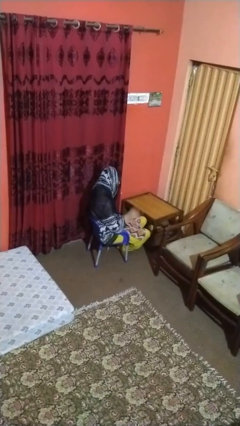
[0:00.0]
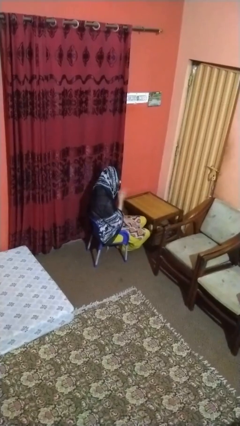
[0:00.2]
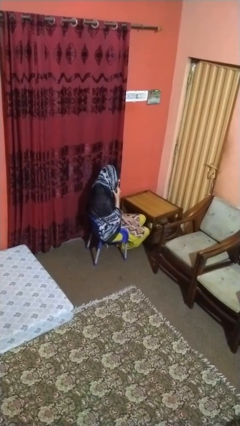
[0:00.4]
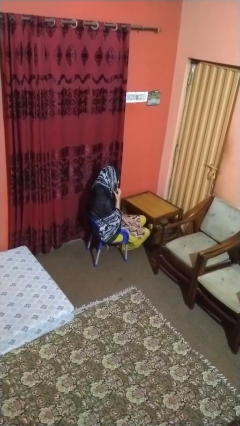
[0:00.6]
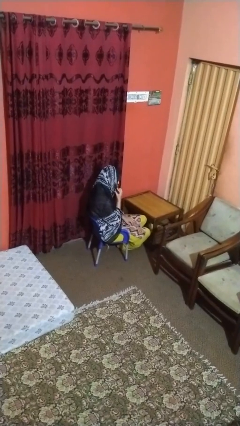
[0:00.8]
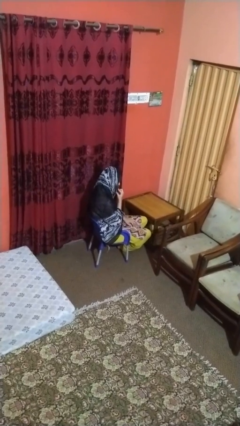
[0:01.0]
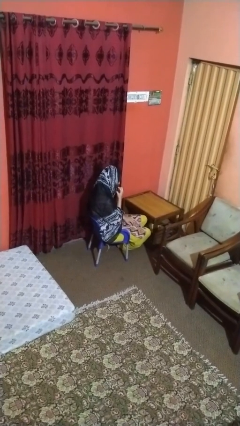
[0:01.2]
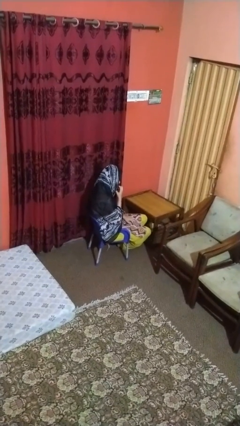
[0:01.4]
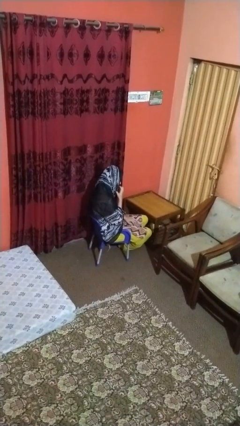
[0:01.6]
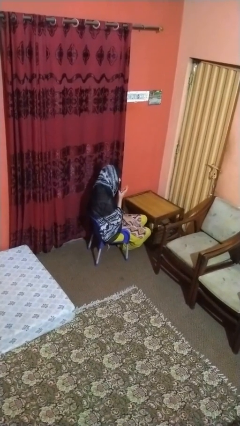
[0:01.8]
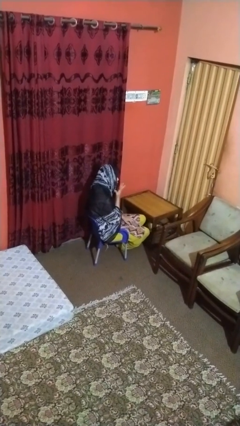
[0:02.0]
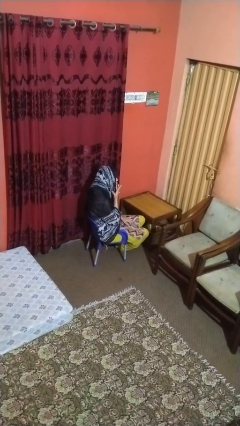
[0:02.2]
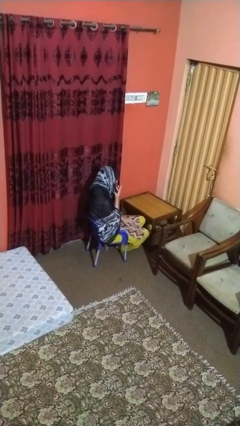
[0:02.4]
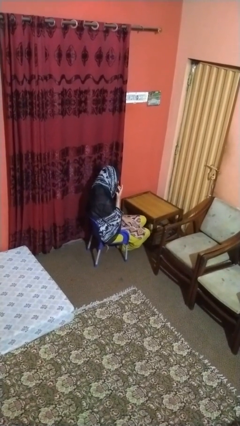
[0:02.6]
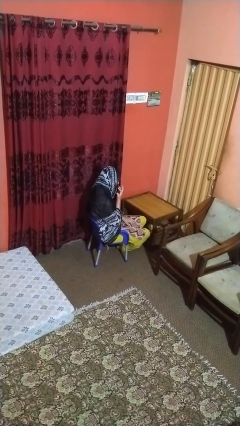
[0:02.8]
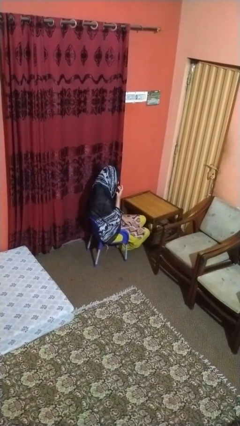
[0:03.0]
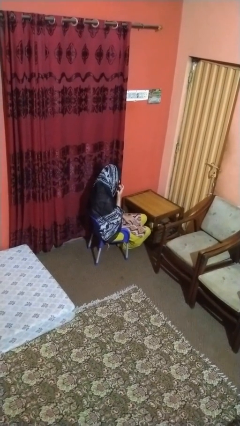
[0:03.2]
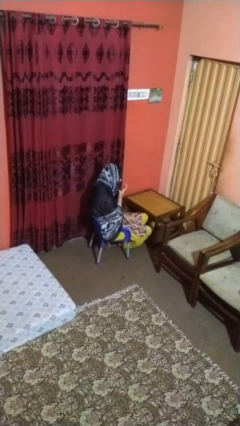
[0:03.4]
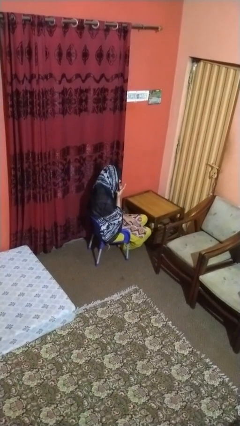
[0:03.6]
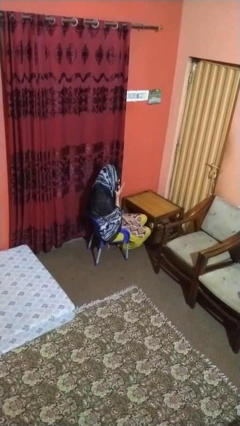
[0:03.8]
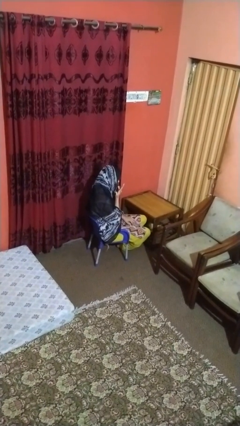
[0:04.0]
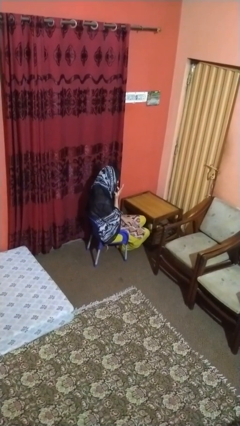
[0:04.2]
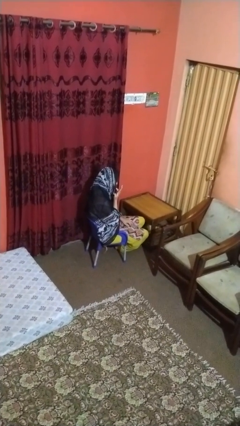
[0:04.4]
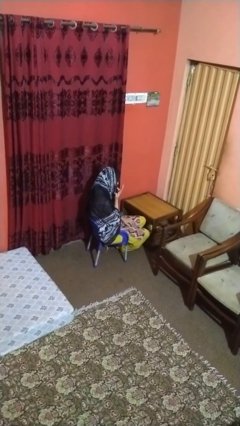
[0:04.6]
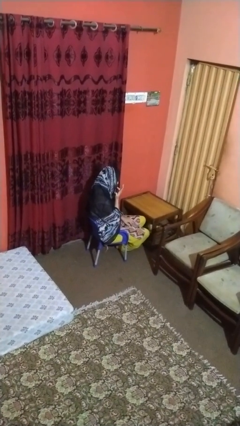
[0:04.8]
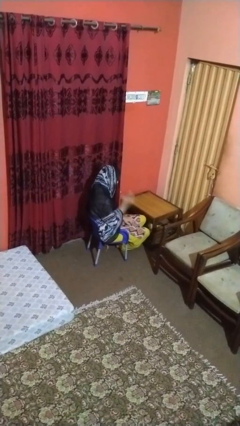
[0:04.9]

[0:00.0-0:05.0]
person licks fingers

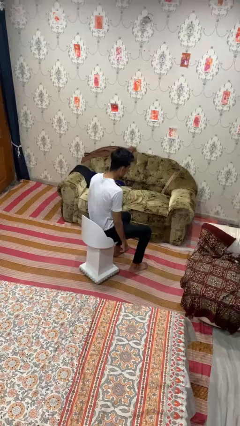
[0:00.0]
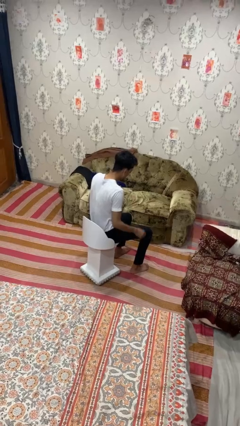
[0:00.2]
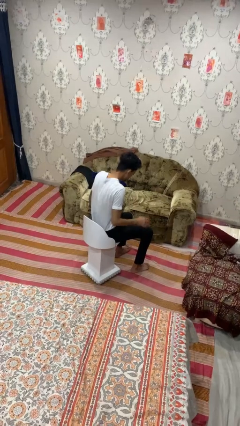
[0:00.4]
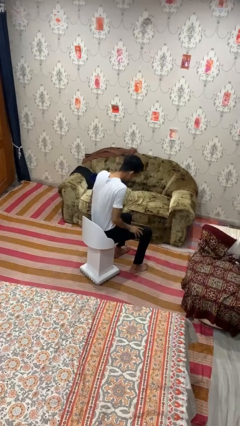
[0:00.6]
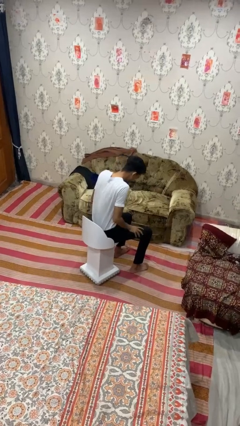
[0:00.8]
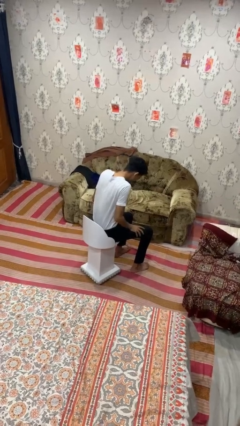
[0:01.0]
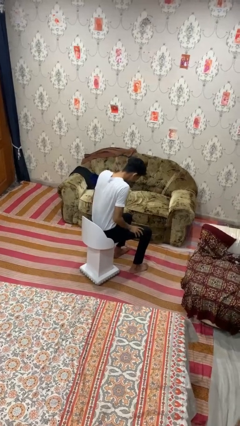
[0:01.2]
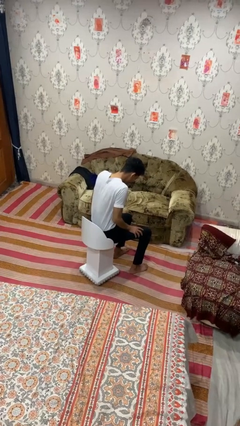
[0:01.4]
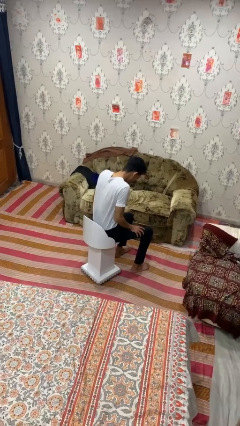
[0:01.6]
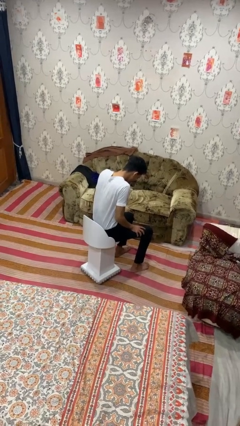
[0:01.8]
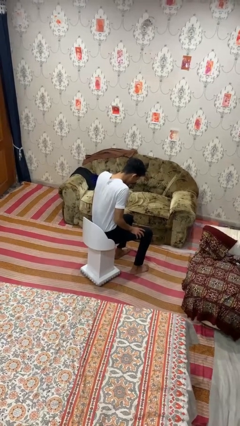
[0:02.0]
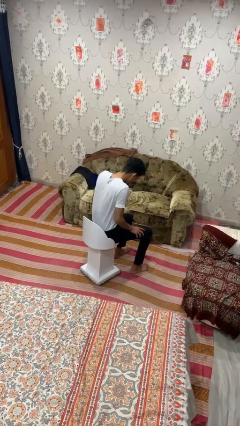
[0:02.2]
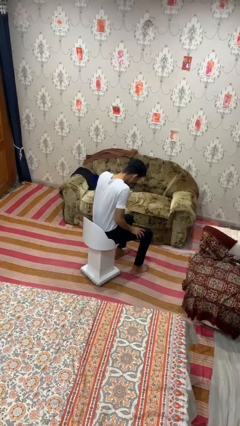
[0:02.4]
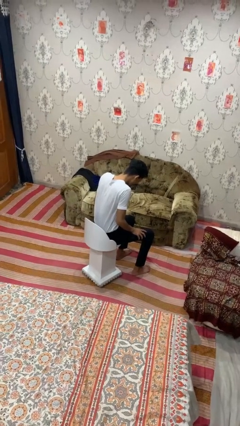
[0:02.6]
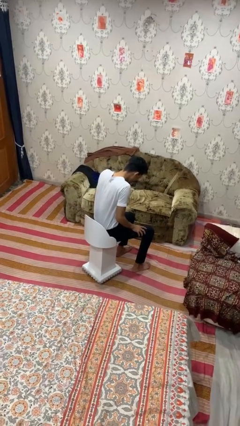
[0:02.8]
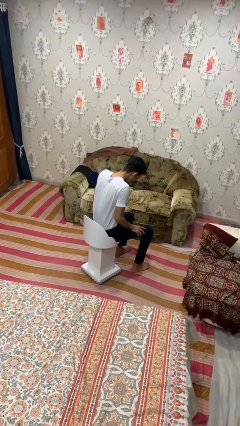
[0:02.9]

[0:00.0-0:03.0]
person slaps hands on thighs

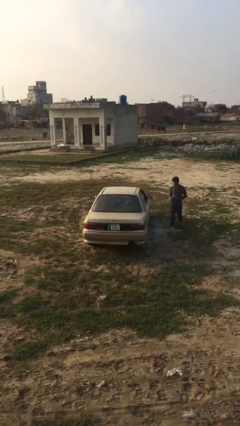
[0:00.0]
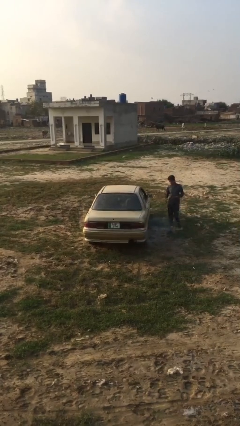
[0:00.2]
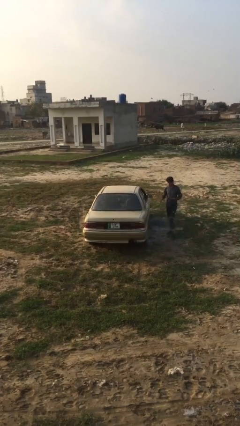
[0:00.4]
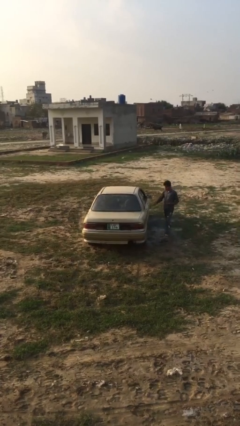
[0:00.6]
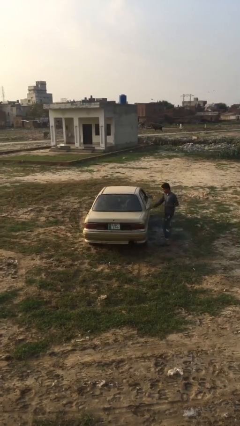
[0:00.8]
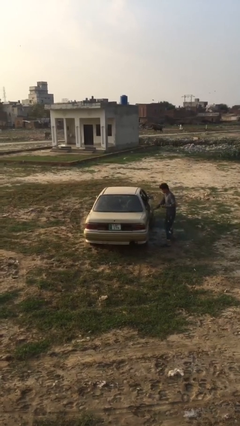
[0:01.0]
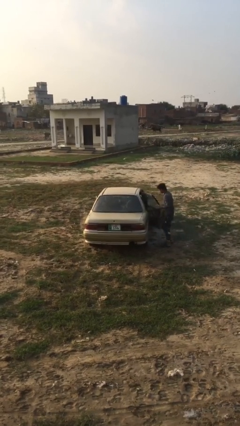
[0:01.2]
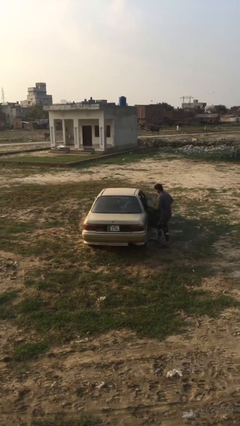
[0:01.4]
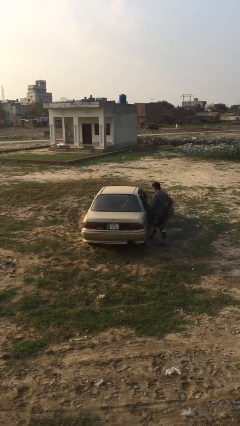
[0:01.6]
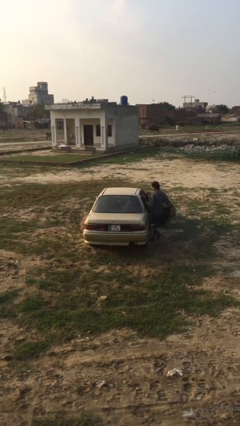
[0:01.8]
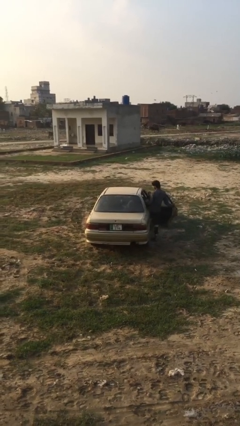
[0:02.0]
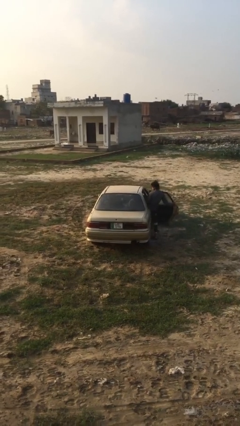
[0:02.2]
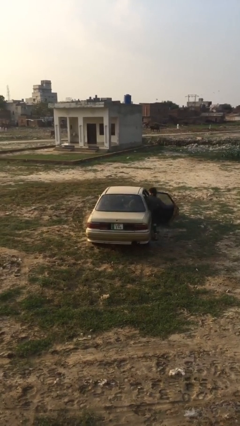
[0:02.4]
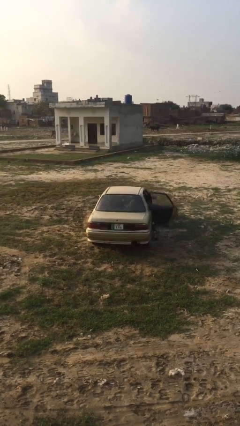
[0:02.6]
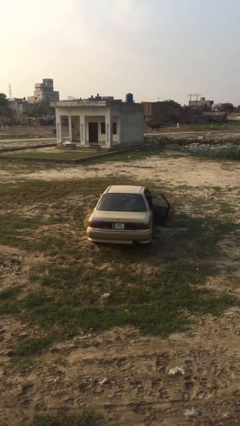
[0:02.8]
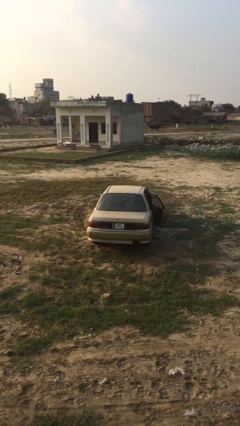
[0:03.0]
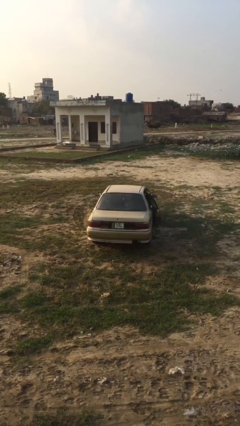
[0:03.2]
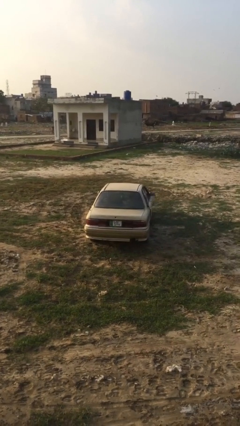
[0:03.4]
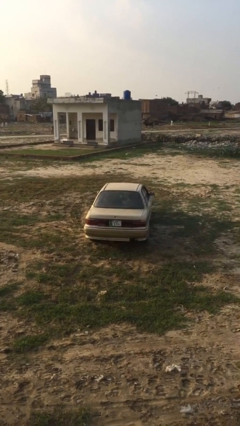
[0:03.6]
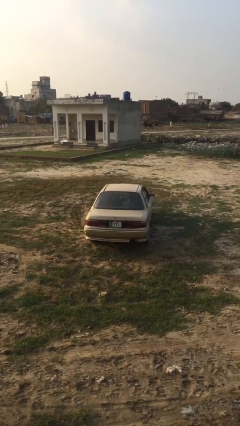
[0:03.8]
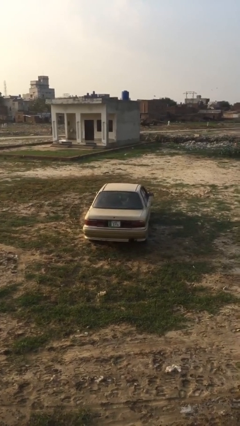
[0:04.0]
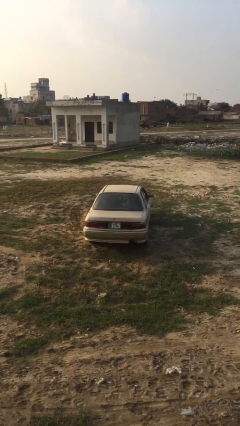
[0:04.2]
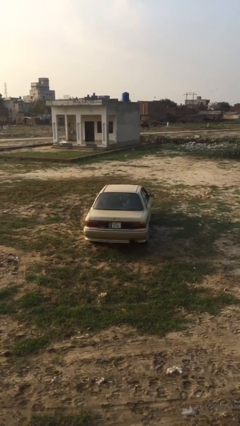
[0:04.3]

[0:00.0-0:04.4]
car picks up person

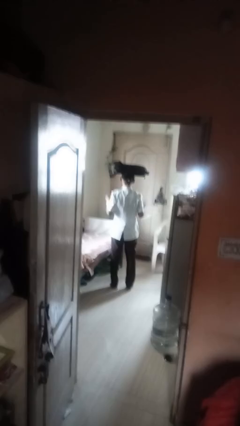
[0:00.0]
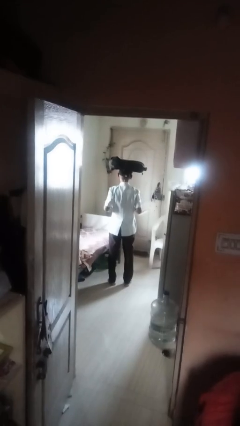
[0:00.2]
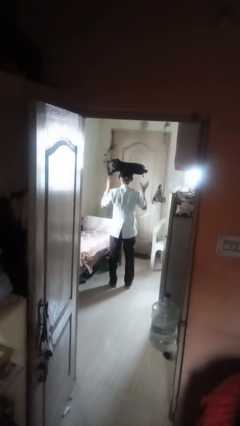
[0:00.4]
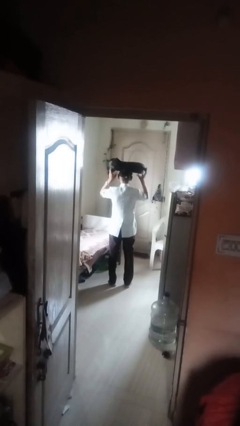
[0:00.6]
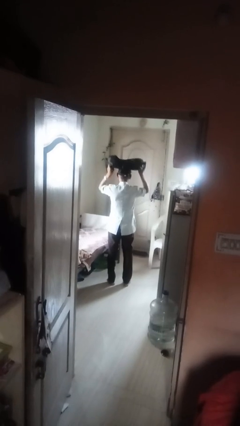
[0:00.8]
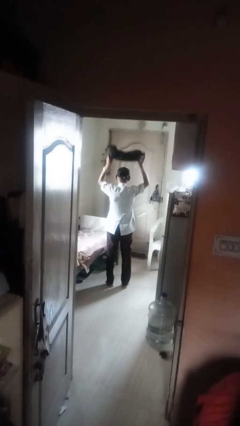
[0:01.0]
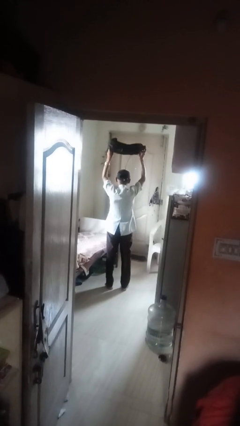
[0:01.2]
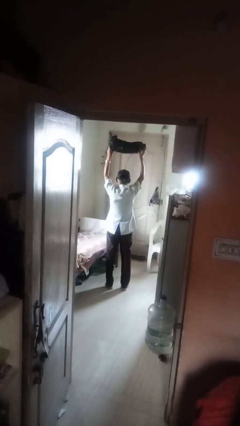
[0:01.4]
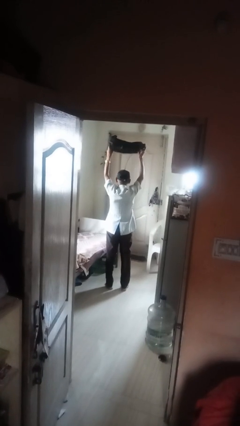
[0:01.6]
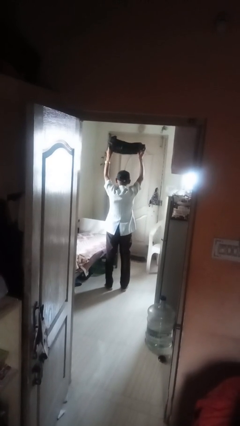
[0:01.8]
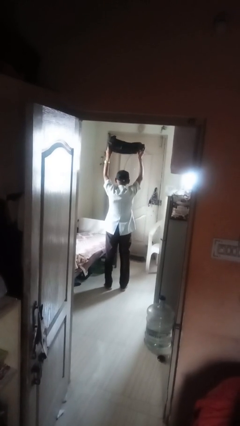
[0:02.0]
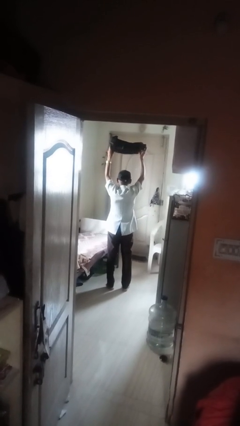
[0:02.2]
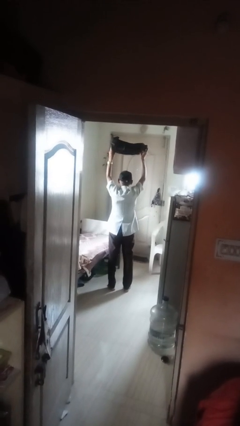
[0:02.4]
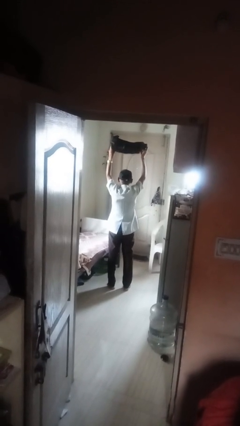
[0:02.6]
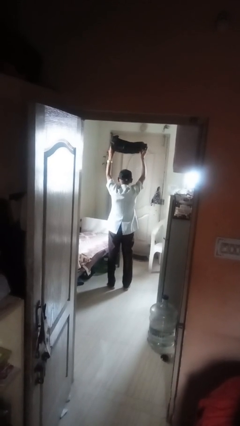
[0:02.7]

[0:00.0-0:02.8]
person holds object above head

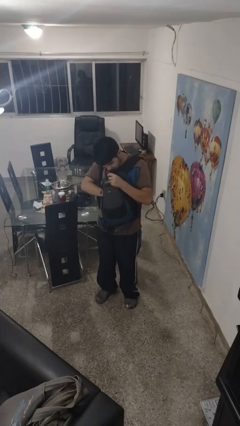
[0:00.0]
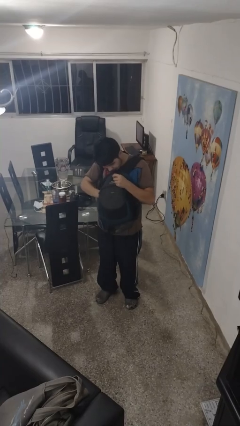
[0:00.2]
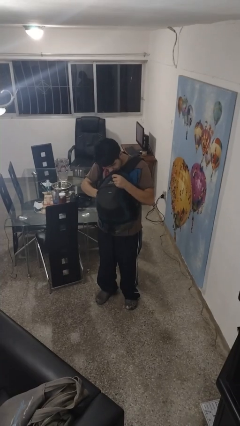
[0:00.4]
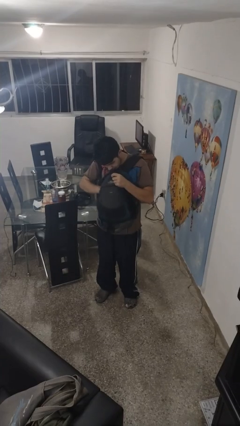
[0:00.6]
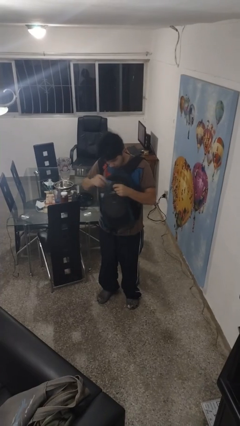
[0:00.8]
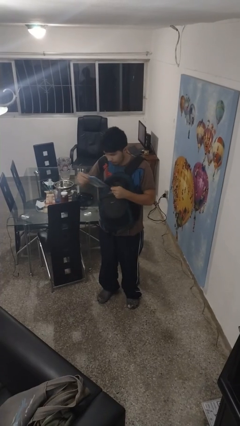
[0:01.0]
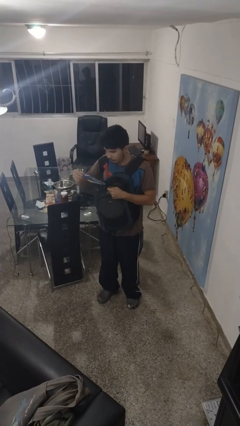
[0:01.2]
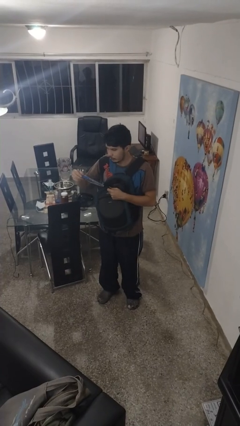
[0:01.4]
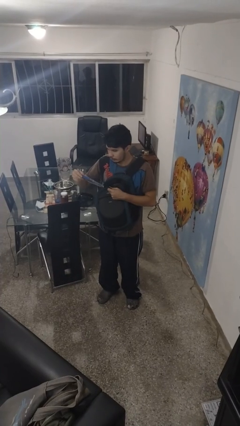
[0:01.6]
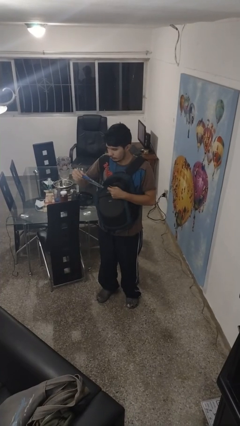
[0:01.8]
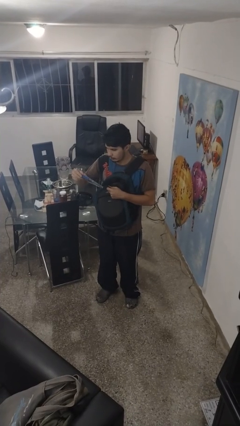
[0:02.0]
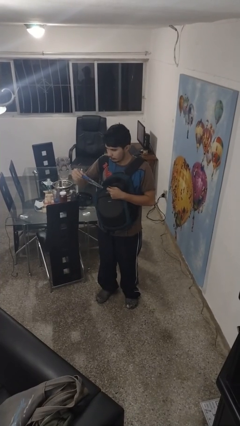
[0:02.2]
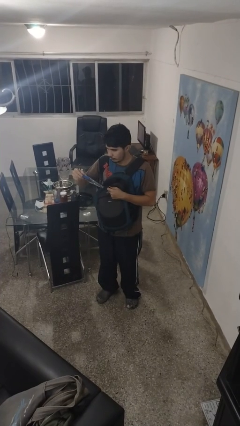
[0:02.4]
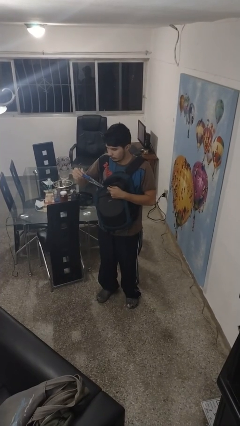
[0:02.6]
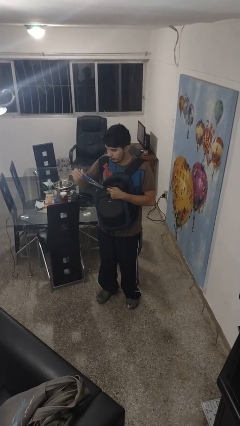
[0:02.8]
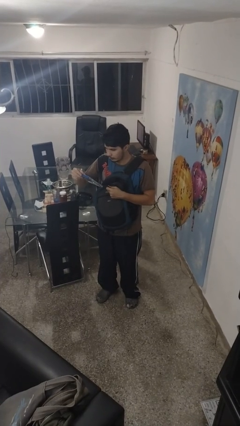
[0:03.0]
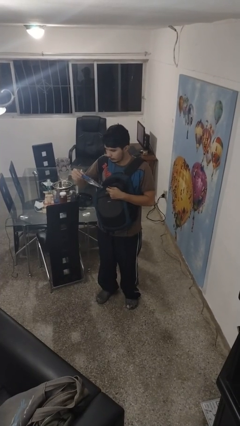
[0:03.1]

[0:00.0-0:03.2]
person takes object from backpack
